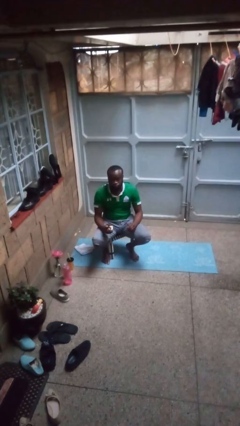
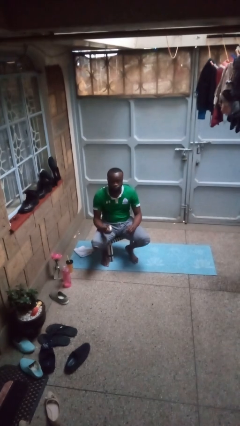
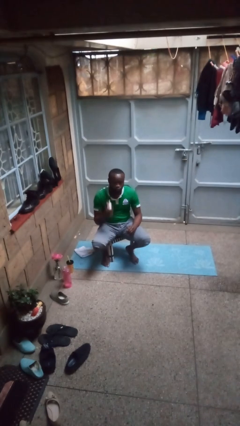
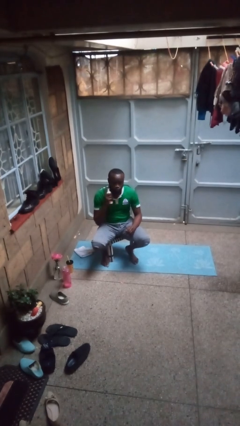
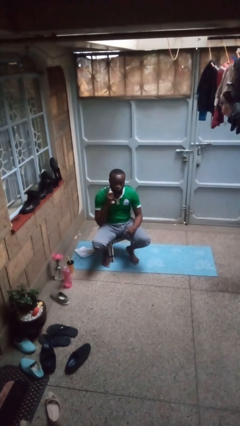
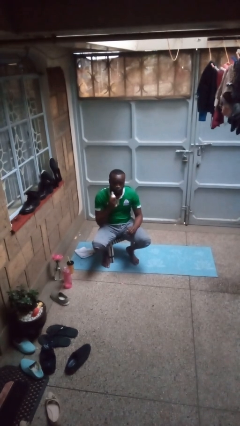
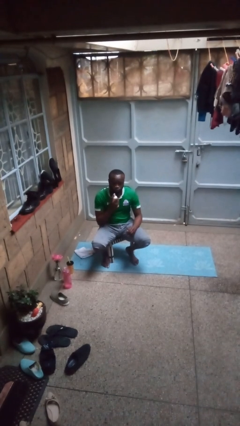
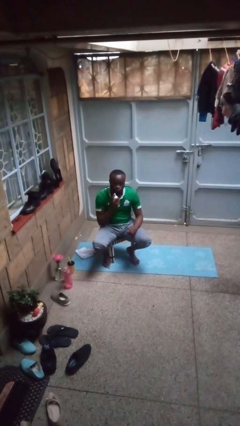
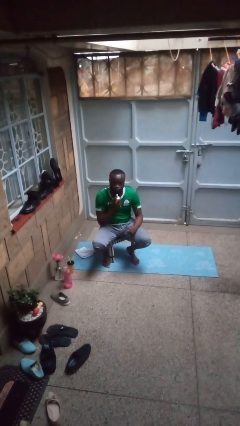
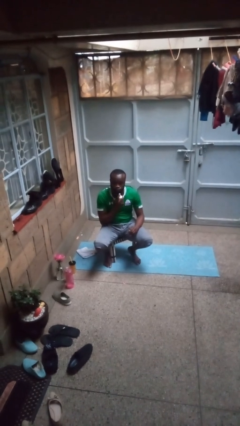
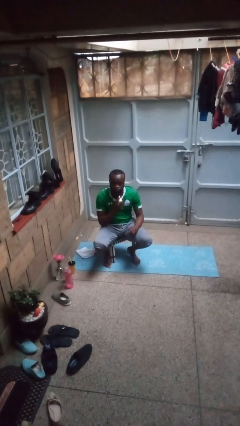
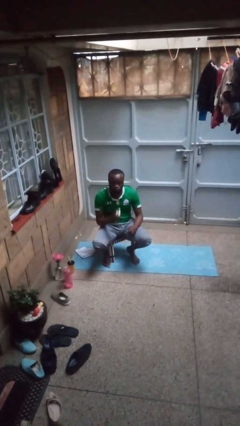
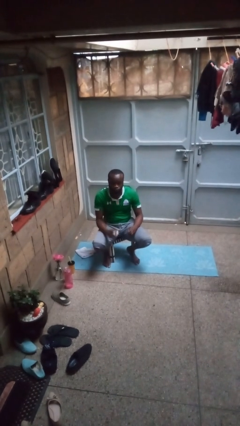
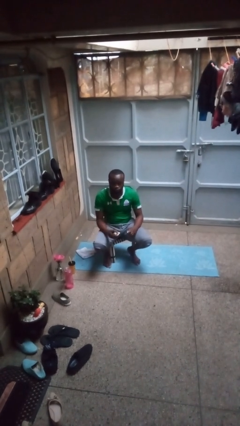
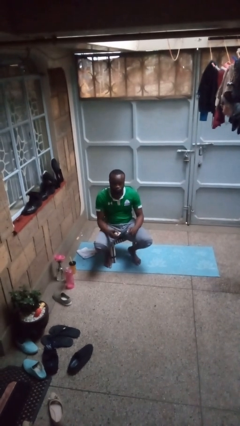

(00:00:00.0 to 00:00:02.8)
person applies shaving cream

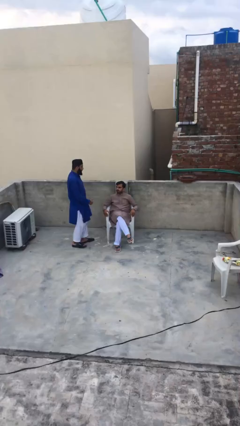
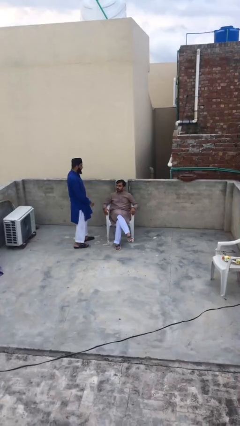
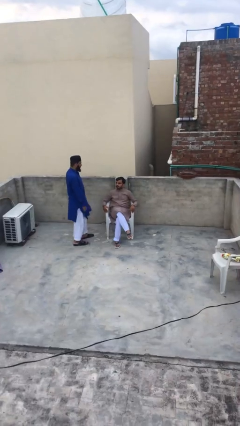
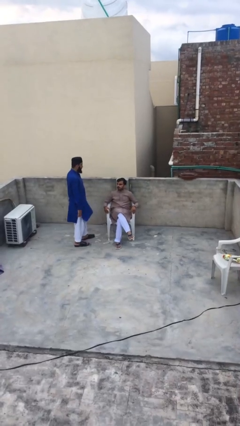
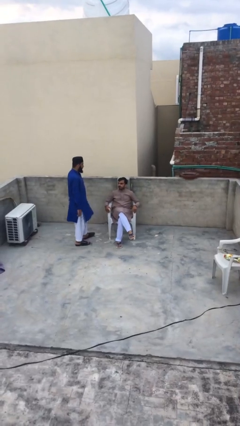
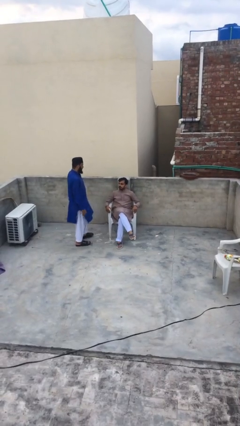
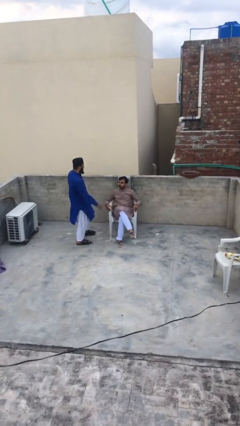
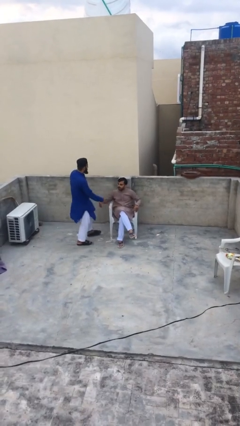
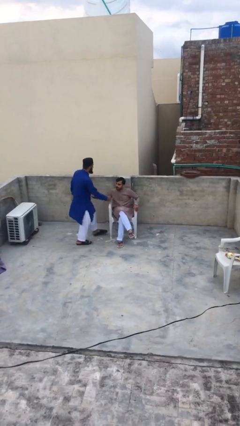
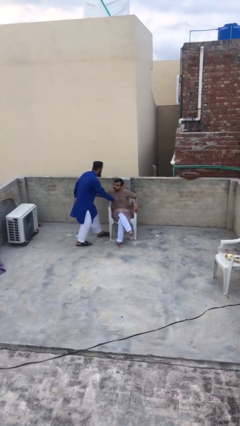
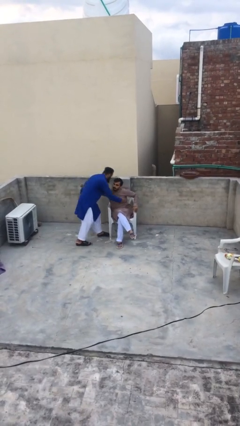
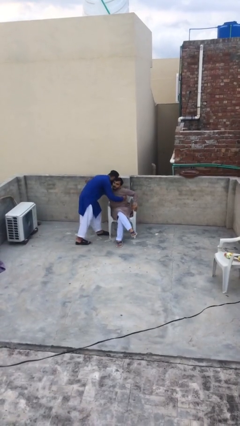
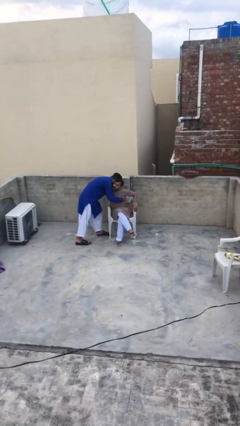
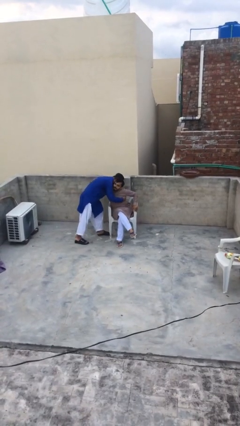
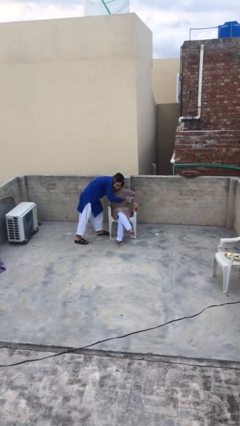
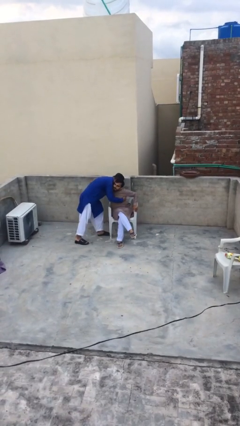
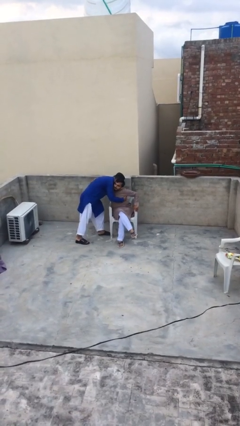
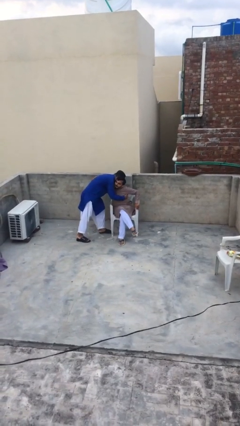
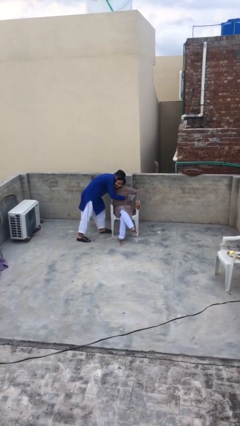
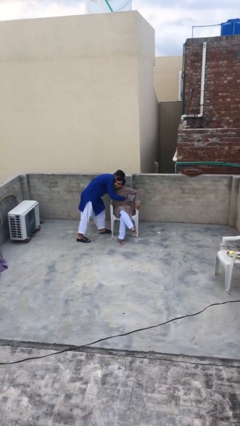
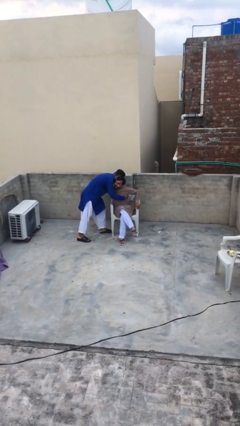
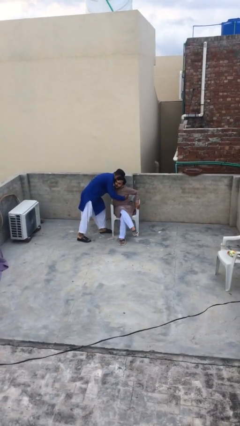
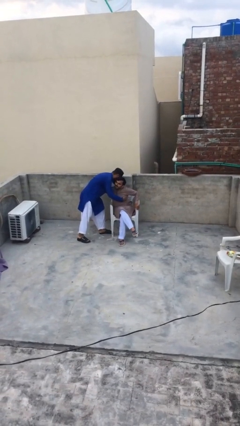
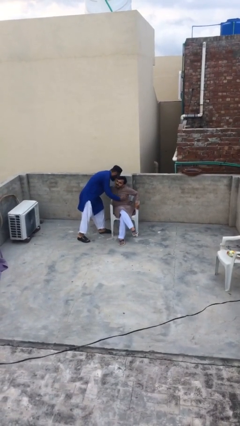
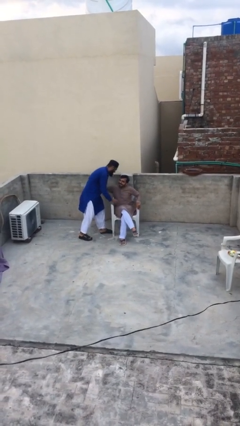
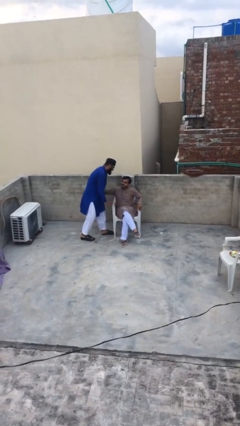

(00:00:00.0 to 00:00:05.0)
person embraces person

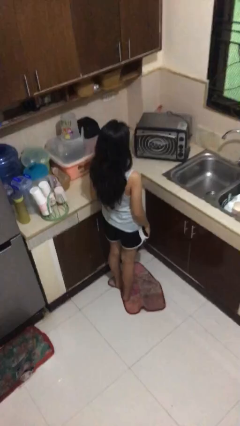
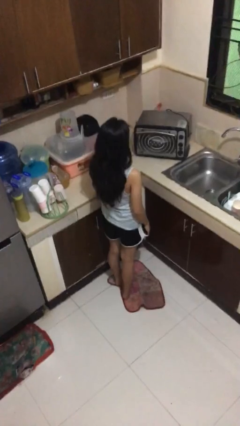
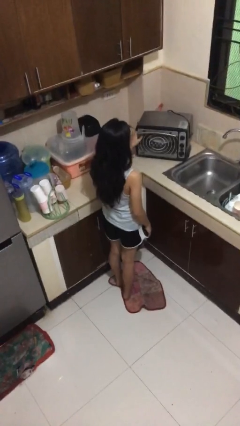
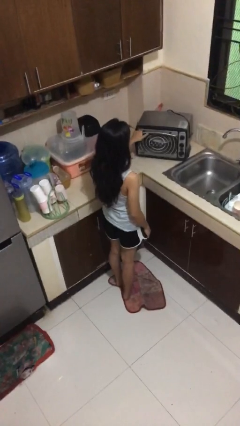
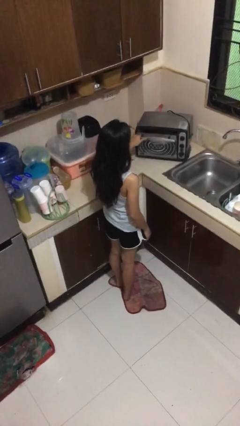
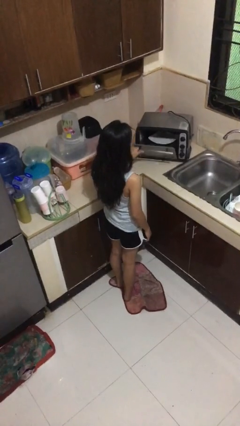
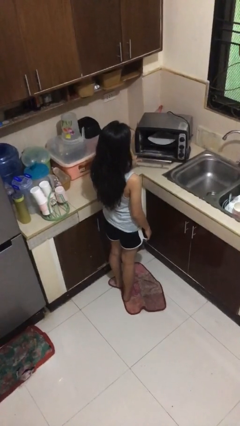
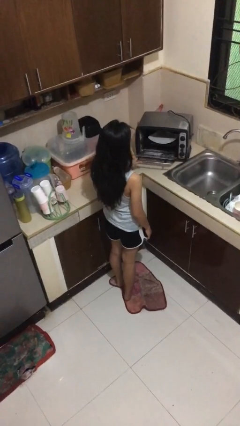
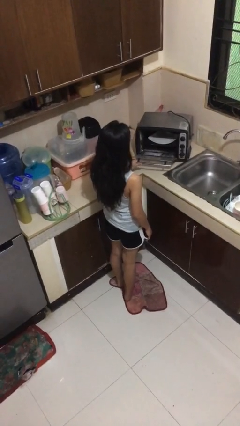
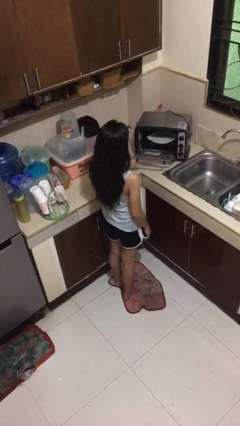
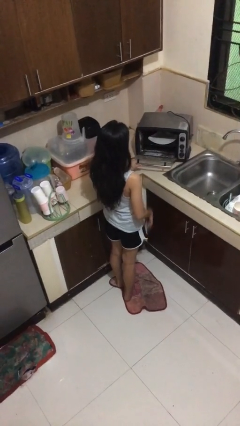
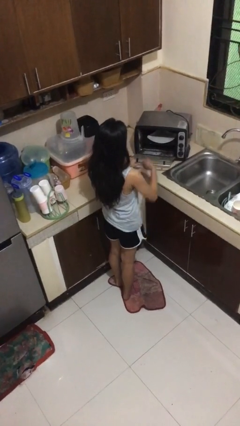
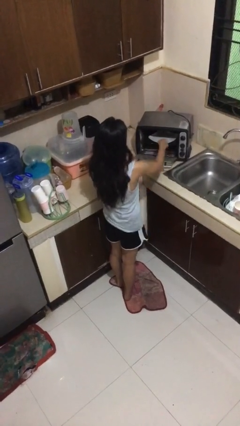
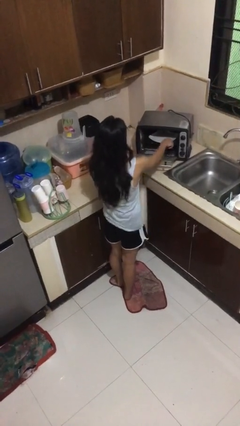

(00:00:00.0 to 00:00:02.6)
person opens microwave

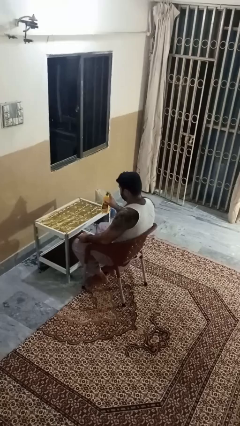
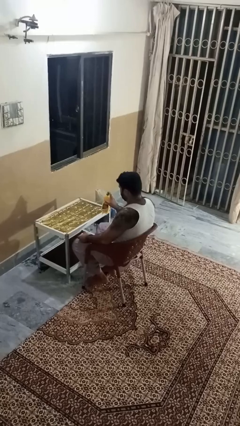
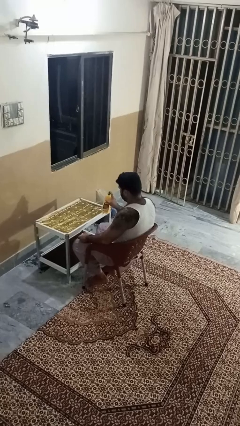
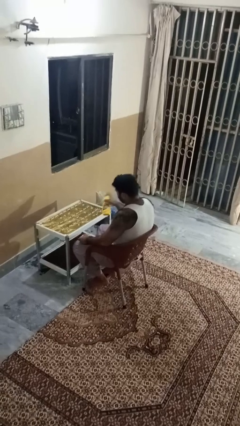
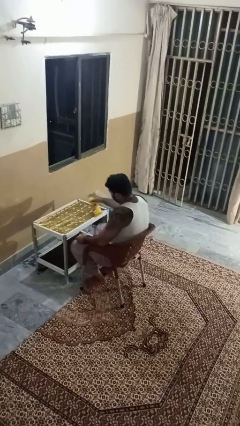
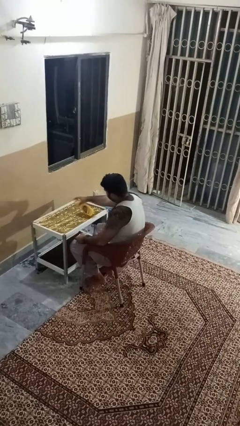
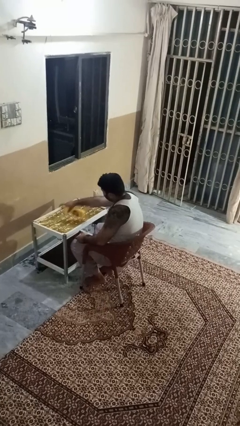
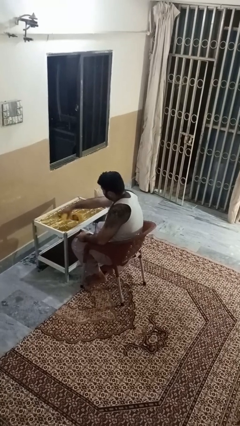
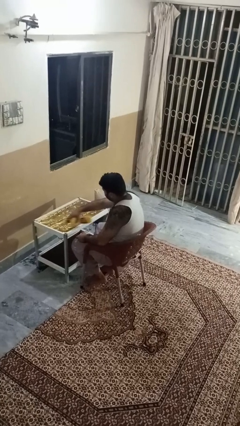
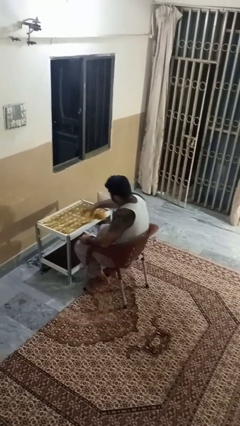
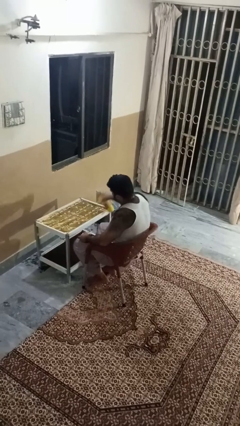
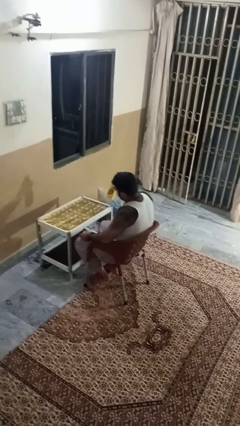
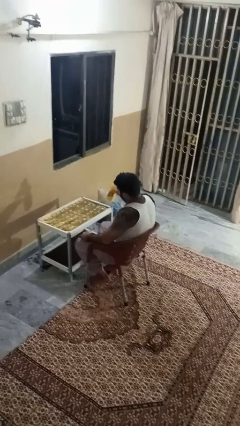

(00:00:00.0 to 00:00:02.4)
person sprays from bottle

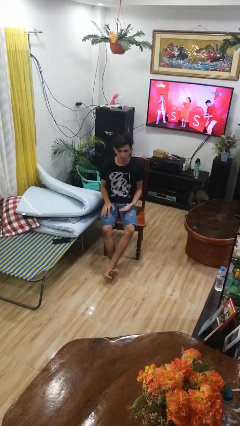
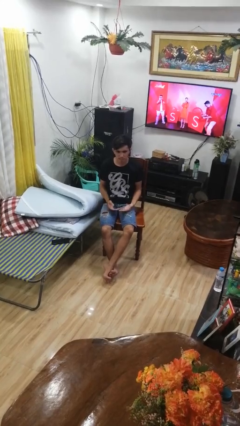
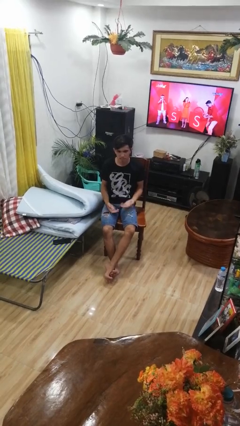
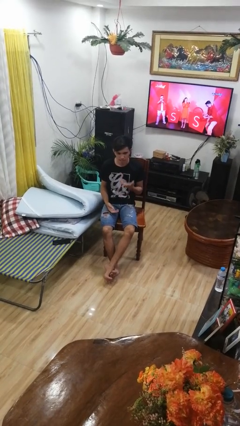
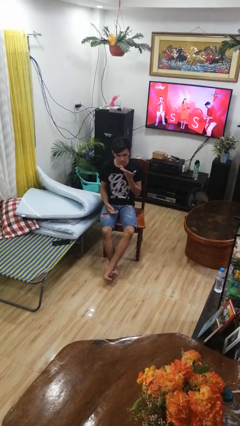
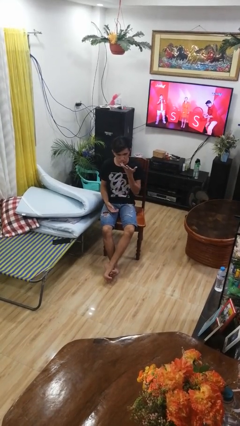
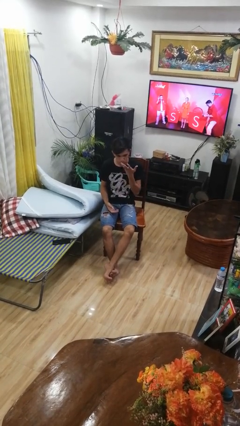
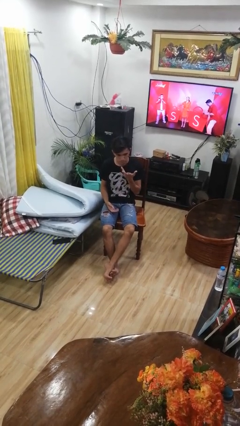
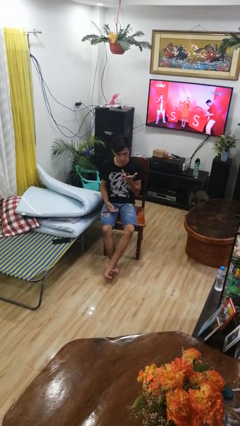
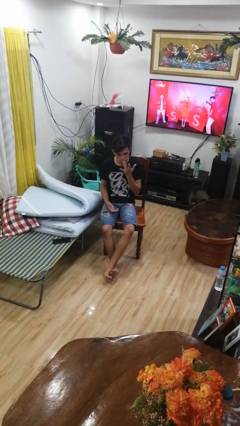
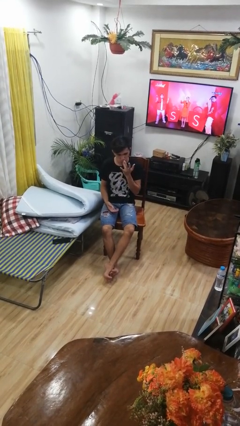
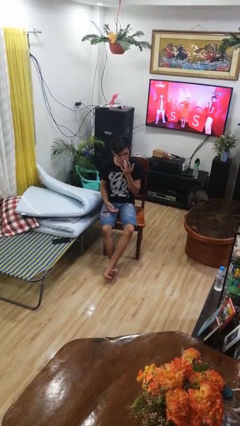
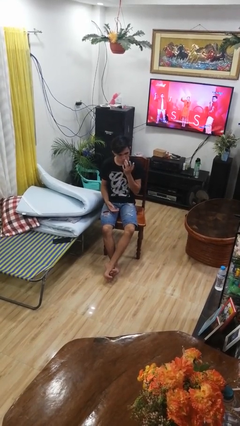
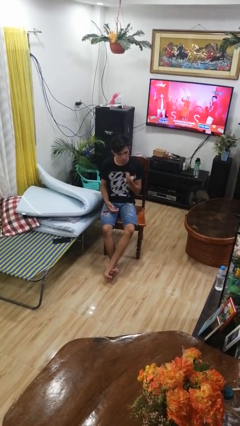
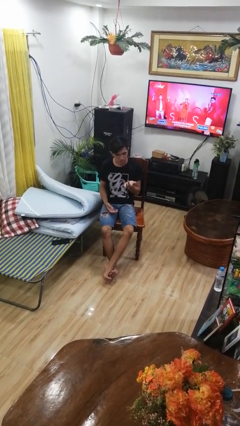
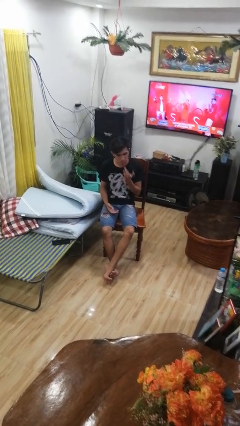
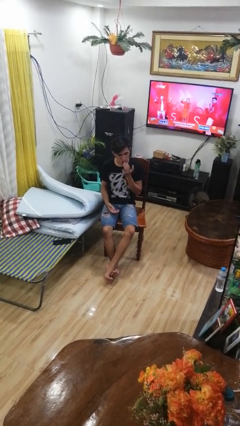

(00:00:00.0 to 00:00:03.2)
person licks fingers

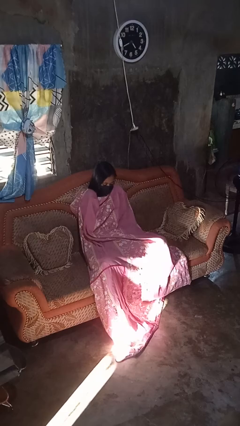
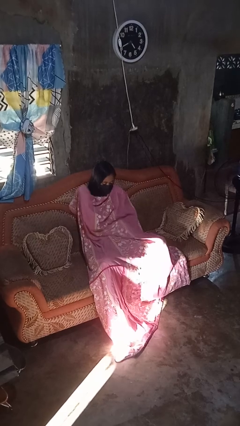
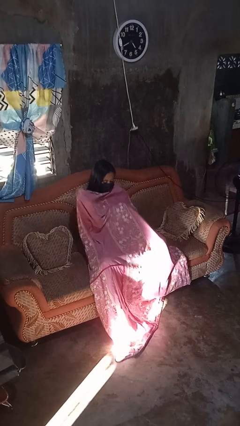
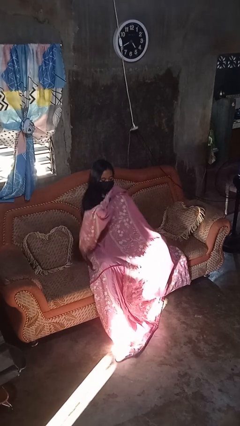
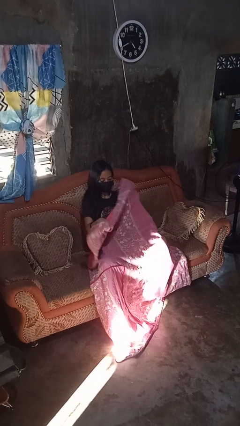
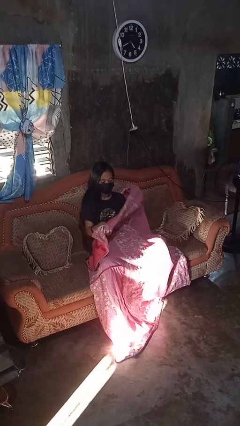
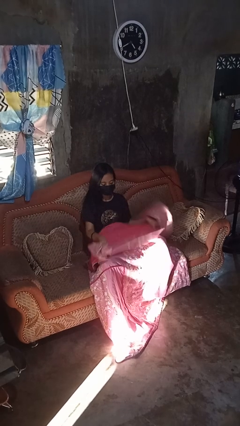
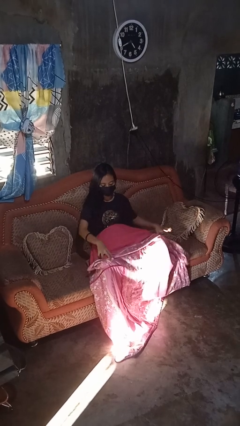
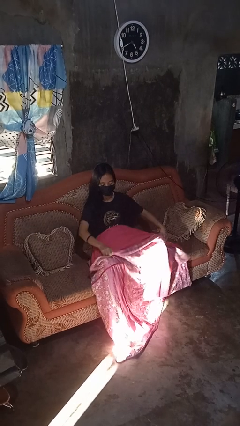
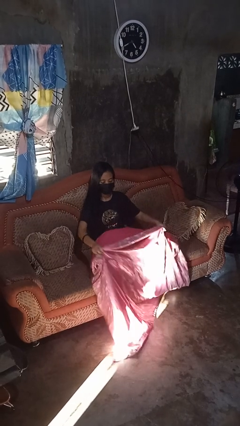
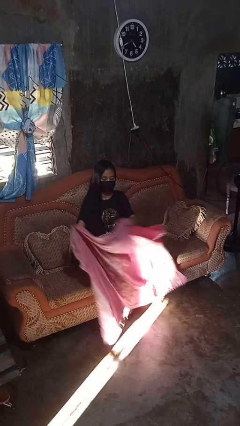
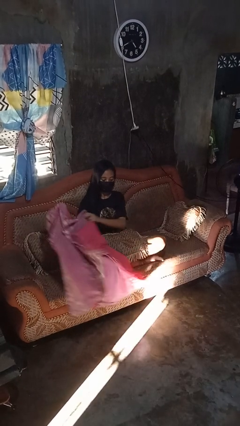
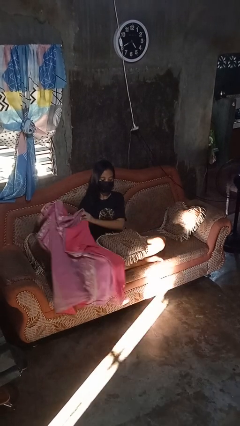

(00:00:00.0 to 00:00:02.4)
person uncovers with blanket
